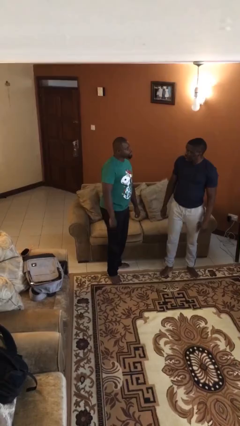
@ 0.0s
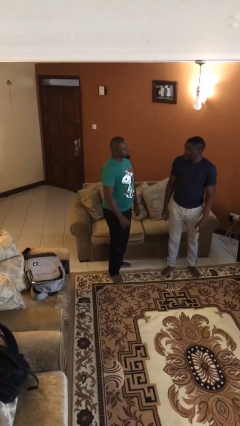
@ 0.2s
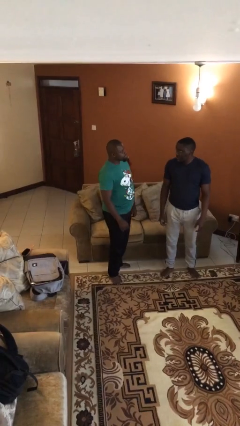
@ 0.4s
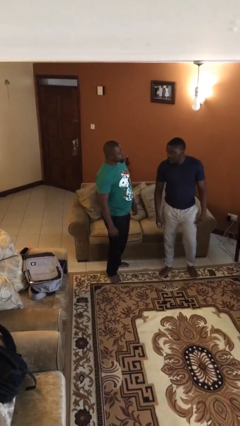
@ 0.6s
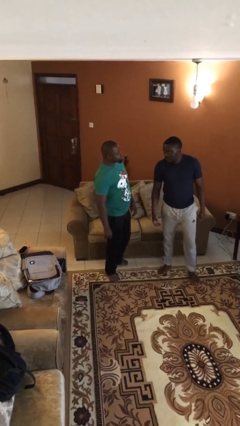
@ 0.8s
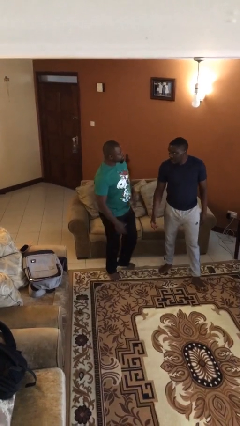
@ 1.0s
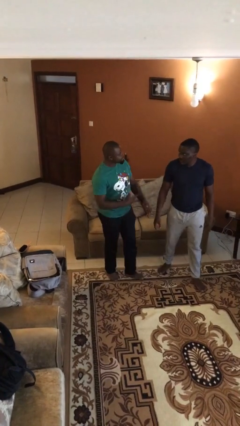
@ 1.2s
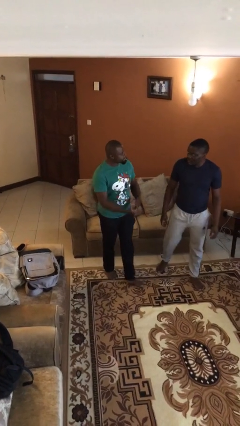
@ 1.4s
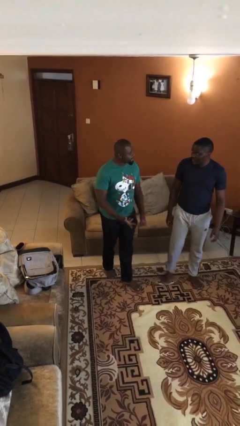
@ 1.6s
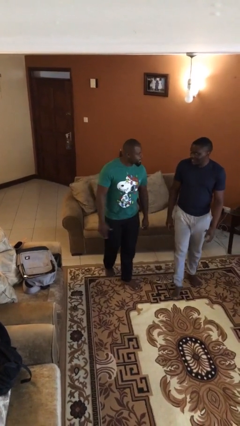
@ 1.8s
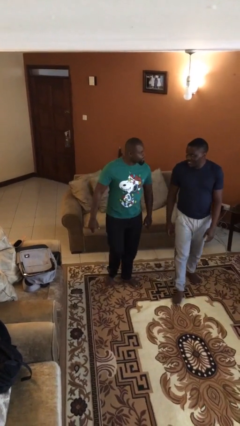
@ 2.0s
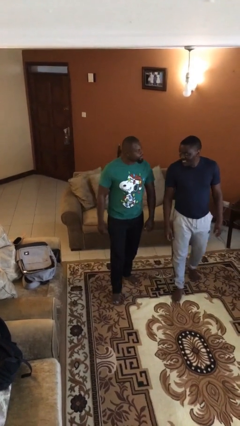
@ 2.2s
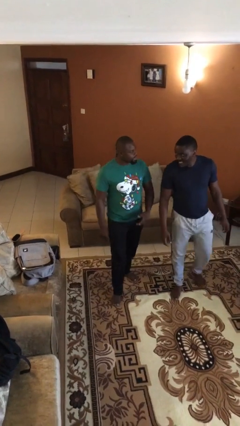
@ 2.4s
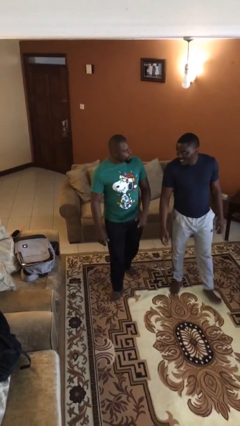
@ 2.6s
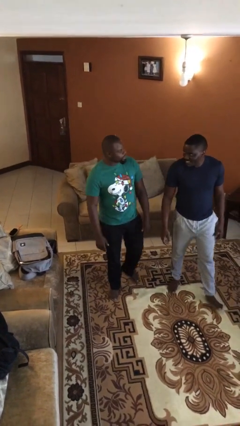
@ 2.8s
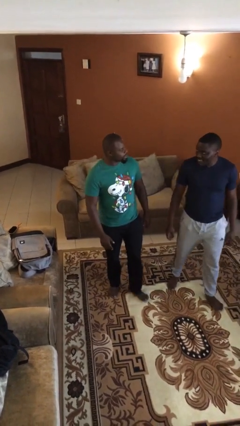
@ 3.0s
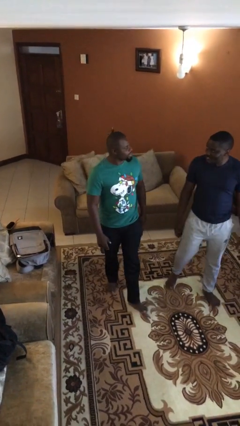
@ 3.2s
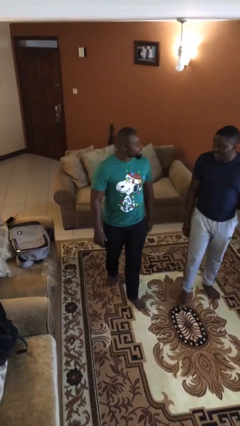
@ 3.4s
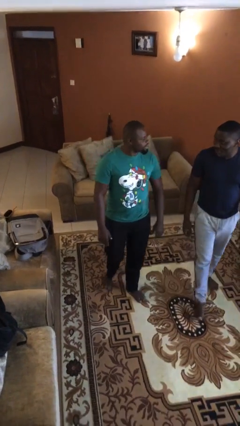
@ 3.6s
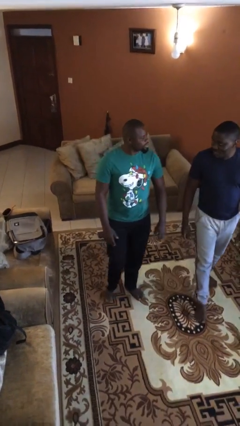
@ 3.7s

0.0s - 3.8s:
person talks to person

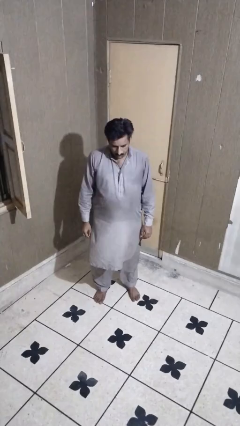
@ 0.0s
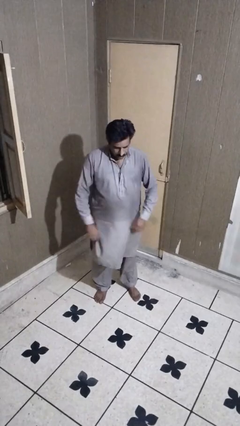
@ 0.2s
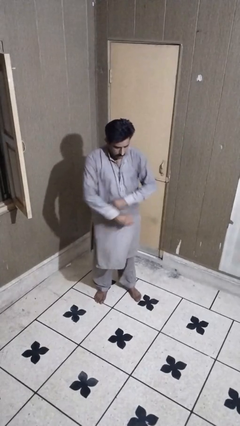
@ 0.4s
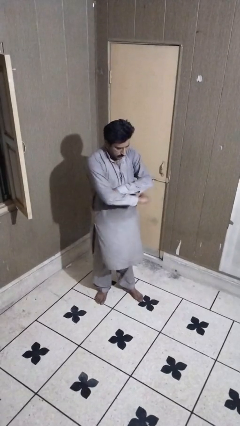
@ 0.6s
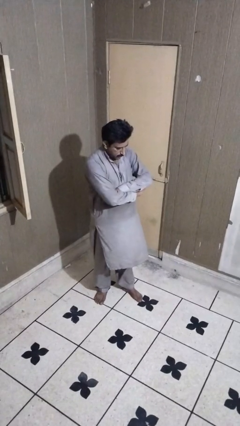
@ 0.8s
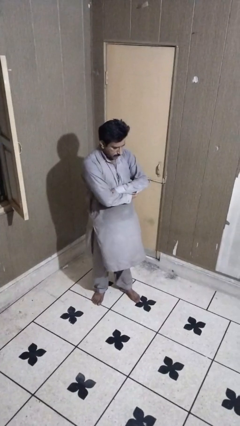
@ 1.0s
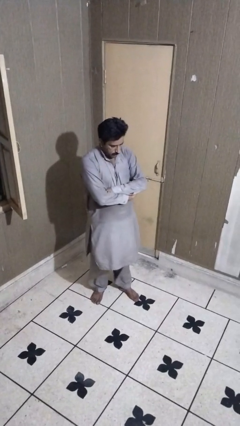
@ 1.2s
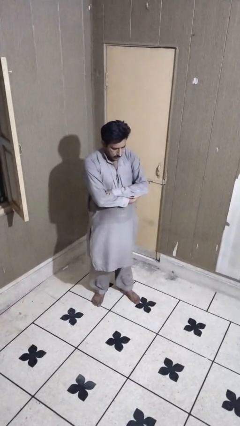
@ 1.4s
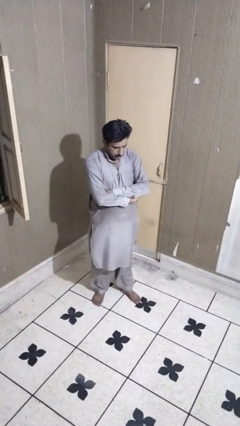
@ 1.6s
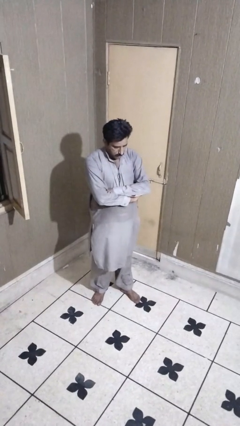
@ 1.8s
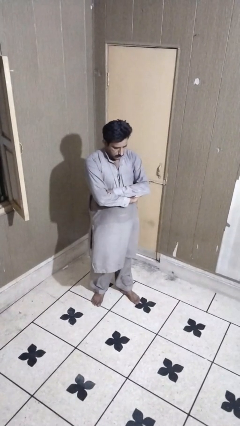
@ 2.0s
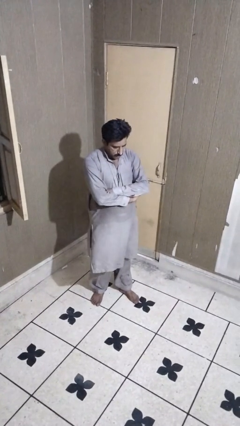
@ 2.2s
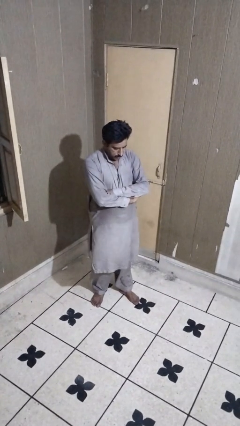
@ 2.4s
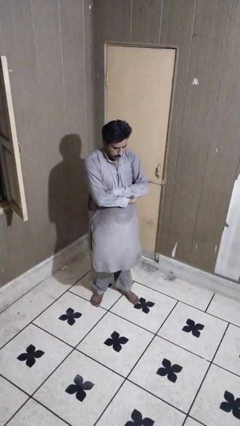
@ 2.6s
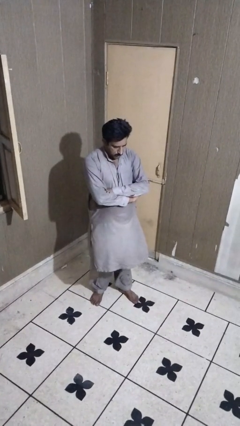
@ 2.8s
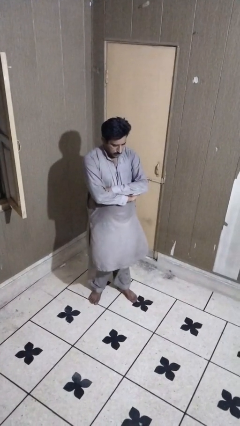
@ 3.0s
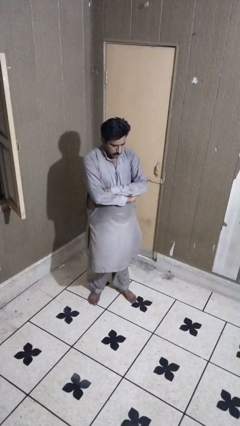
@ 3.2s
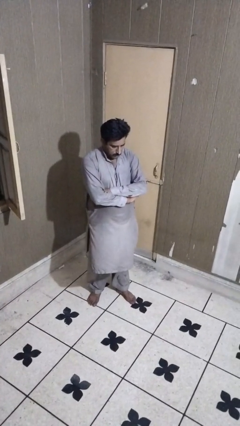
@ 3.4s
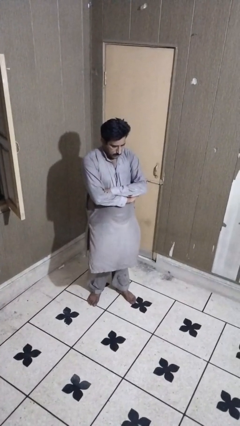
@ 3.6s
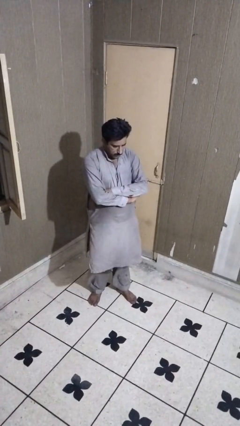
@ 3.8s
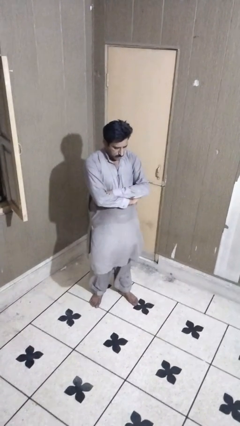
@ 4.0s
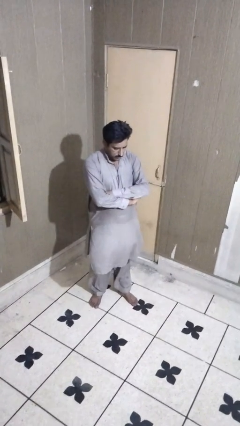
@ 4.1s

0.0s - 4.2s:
person crosses arms

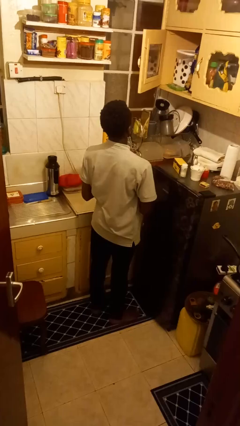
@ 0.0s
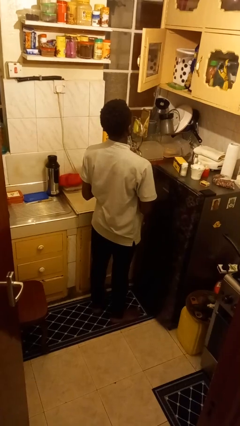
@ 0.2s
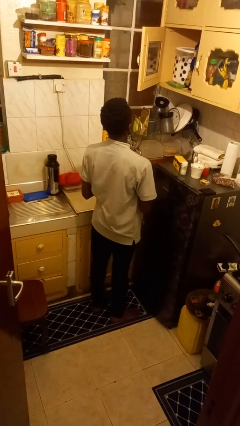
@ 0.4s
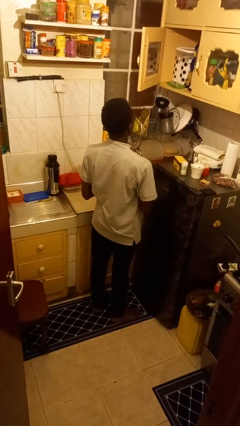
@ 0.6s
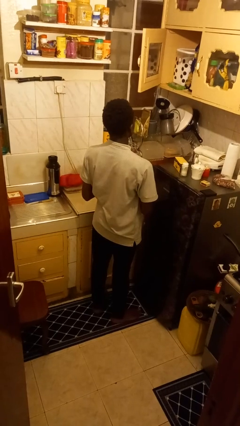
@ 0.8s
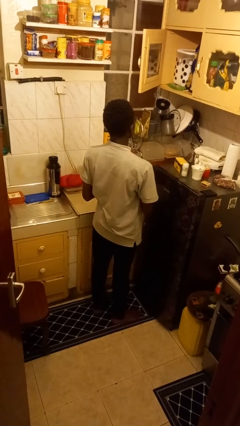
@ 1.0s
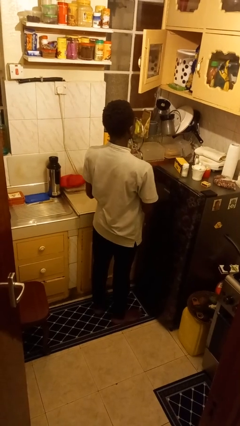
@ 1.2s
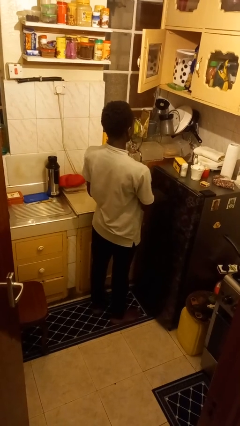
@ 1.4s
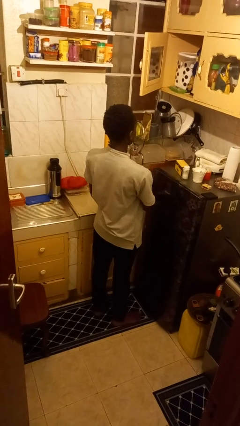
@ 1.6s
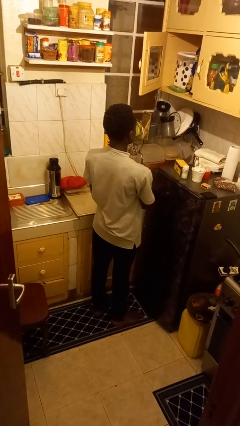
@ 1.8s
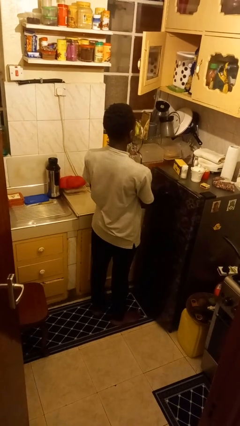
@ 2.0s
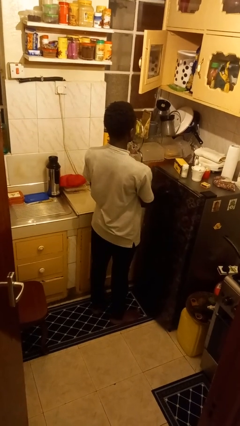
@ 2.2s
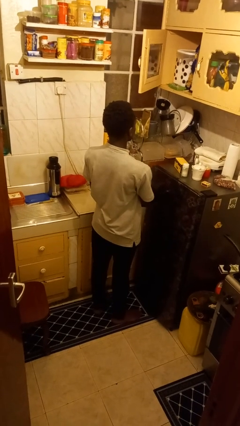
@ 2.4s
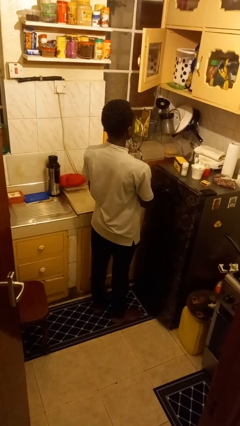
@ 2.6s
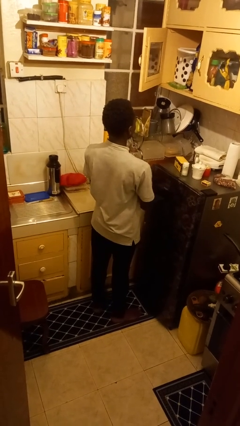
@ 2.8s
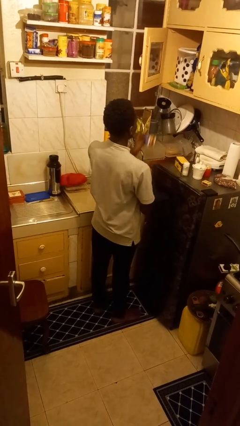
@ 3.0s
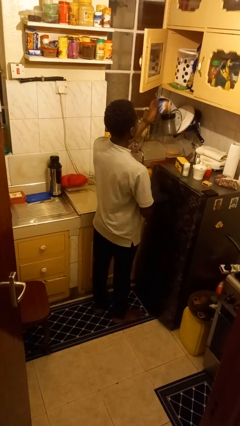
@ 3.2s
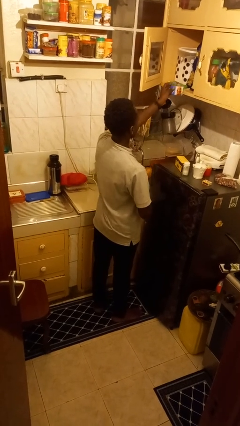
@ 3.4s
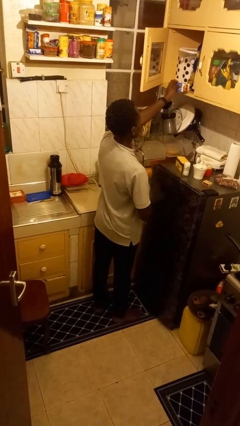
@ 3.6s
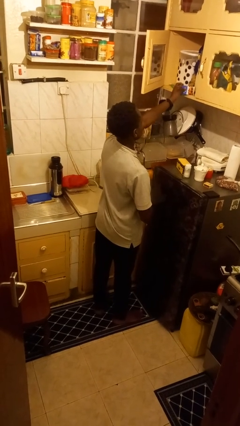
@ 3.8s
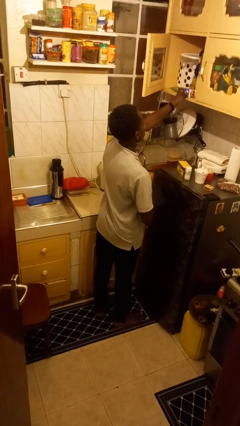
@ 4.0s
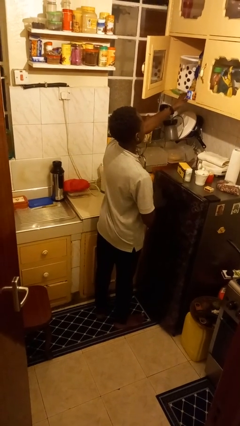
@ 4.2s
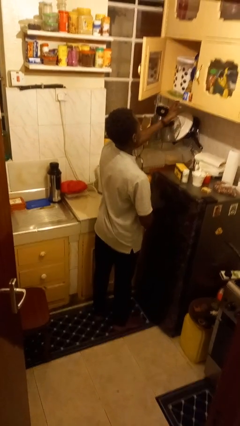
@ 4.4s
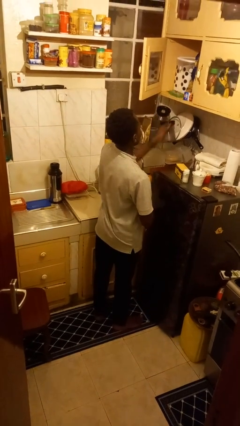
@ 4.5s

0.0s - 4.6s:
person puts down object into cabinet

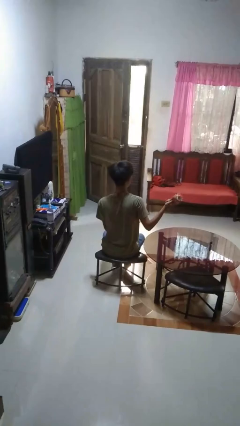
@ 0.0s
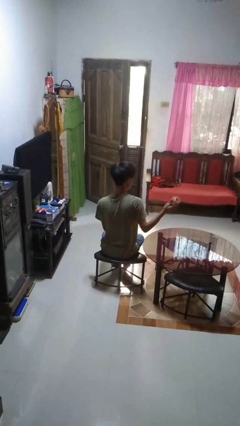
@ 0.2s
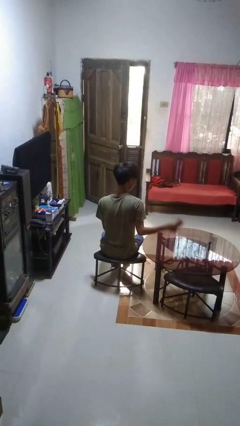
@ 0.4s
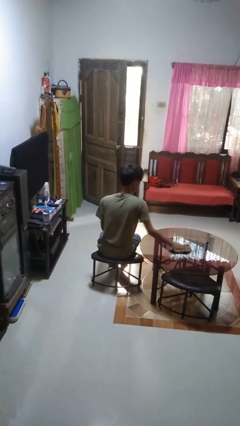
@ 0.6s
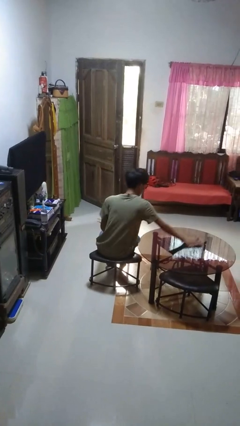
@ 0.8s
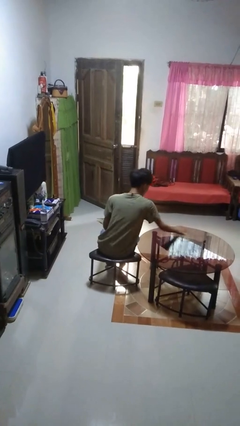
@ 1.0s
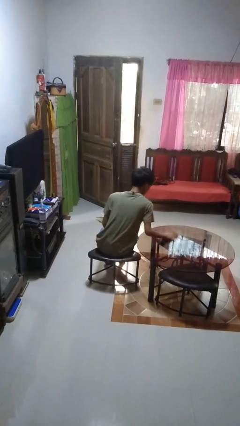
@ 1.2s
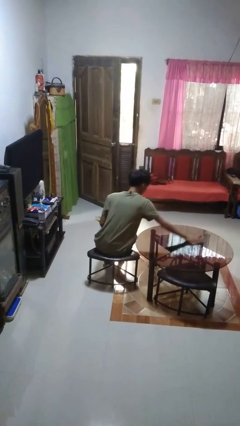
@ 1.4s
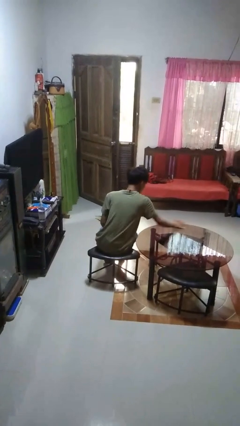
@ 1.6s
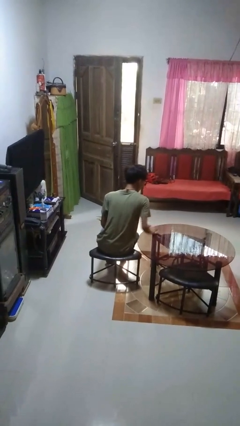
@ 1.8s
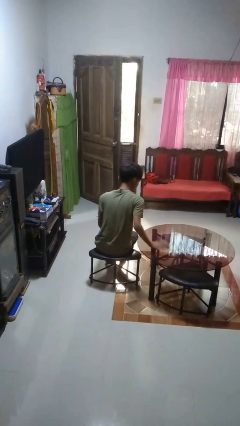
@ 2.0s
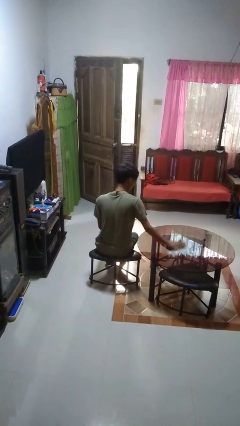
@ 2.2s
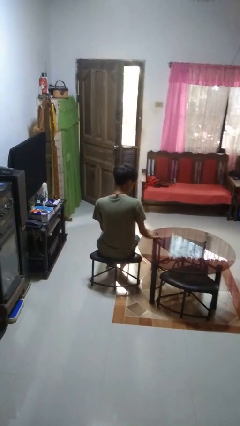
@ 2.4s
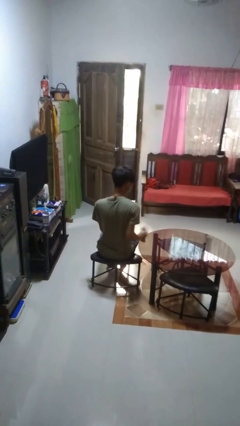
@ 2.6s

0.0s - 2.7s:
person cleans table with rag

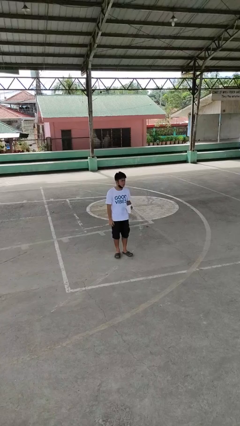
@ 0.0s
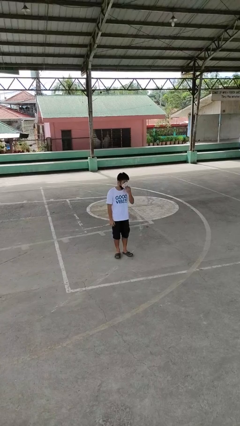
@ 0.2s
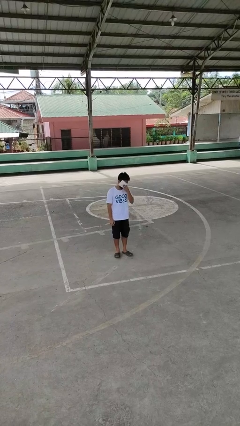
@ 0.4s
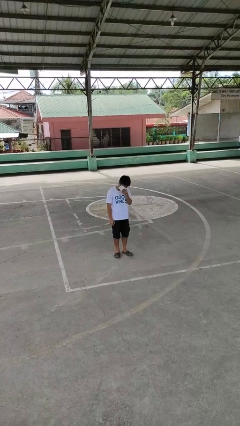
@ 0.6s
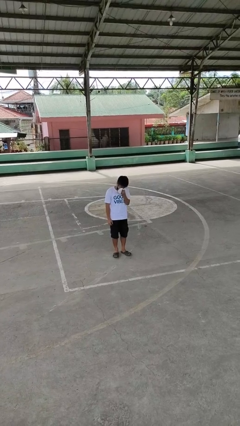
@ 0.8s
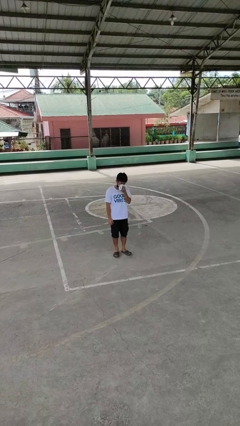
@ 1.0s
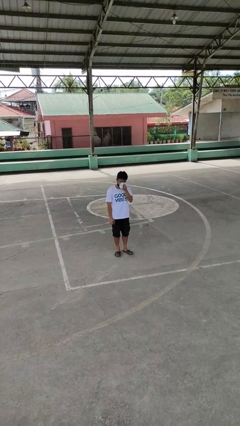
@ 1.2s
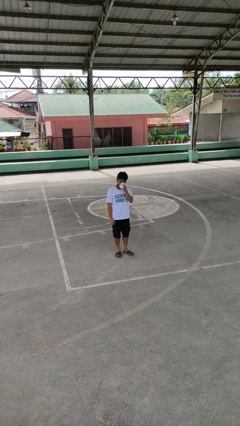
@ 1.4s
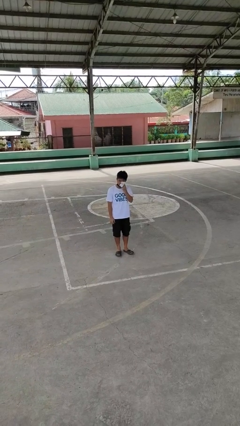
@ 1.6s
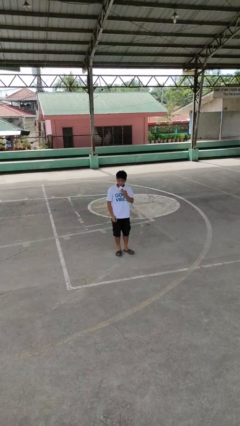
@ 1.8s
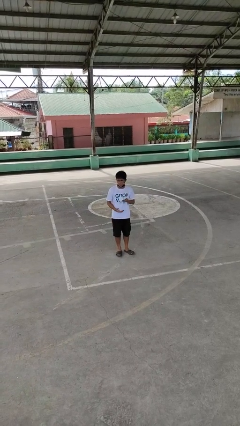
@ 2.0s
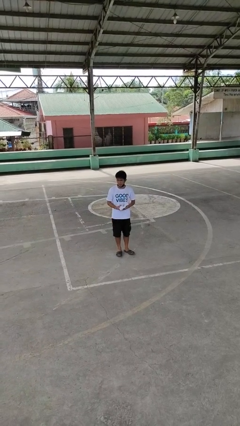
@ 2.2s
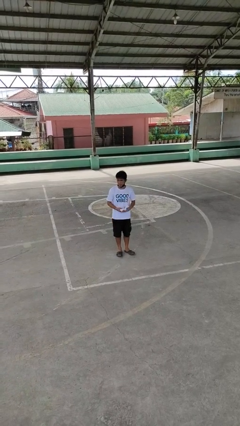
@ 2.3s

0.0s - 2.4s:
person holds object above head
